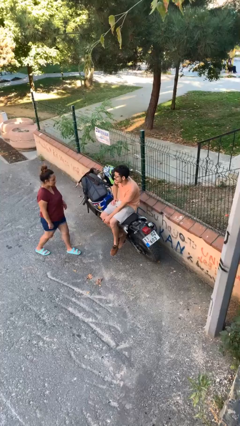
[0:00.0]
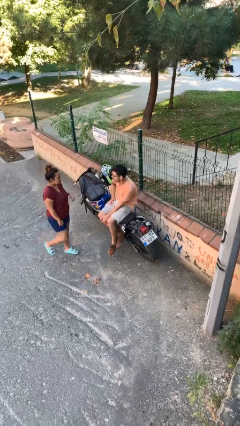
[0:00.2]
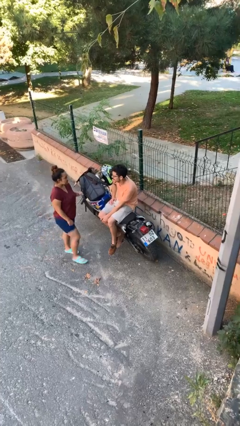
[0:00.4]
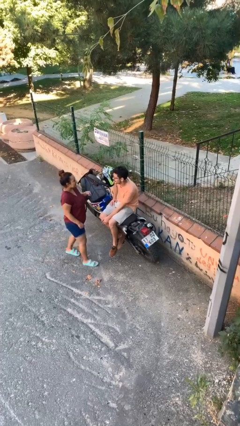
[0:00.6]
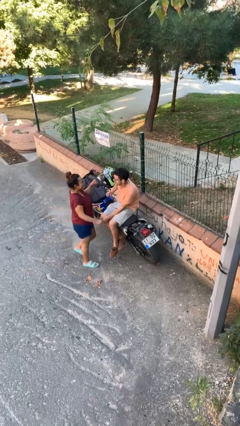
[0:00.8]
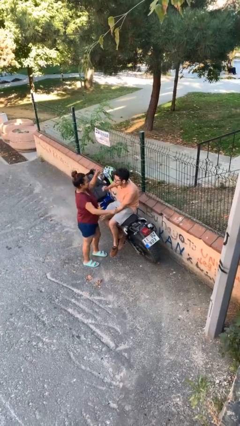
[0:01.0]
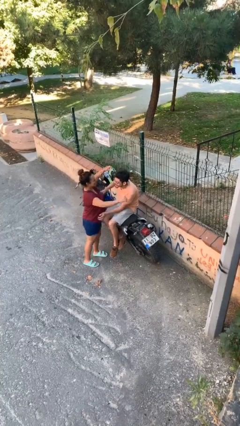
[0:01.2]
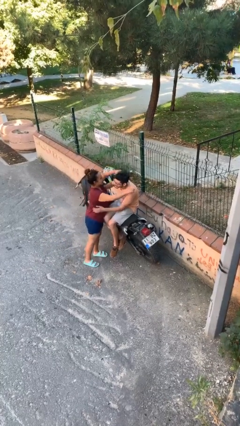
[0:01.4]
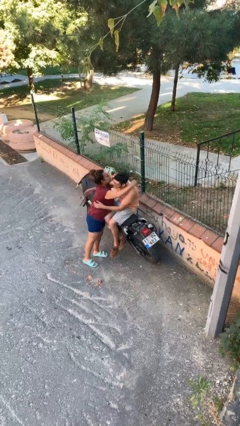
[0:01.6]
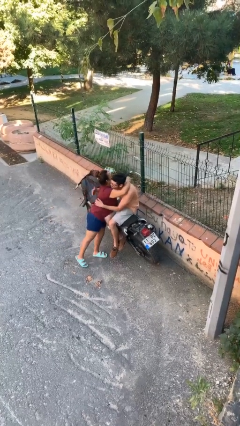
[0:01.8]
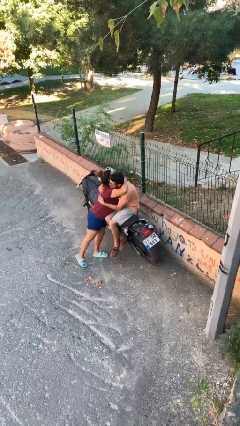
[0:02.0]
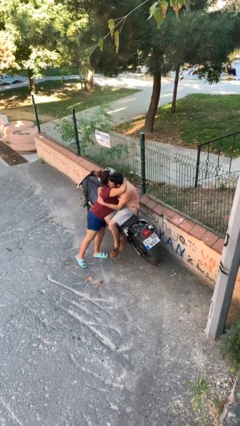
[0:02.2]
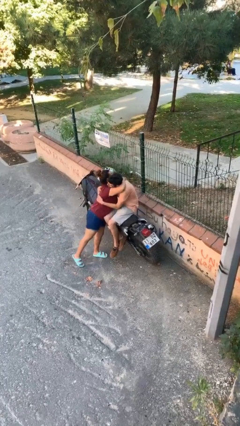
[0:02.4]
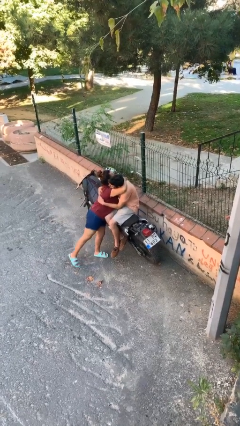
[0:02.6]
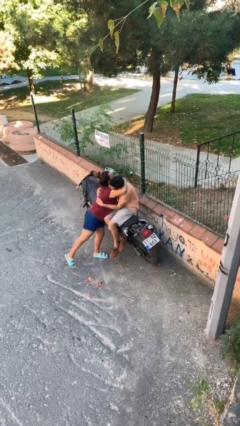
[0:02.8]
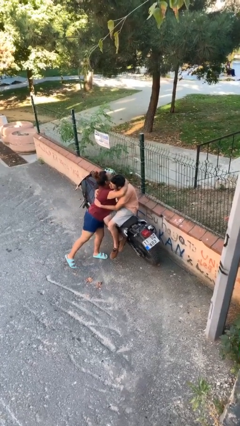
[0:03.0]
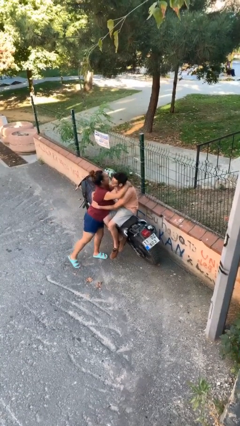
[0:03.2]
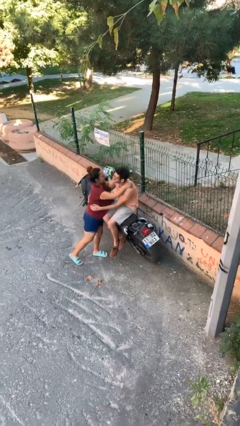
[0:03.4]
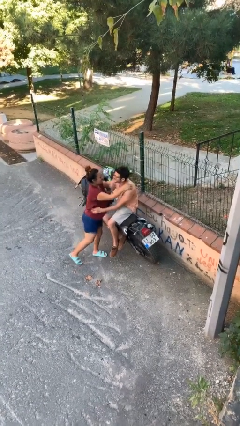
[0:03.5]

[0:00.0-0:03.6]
person embraces person

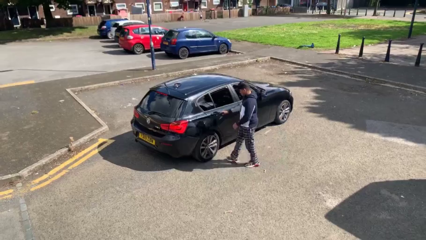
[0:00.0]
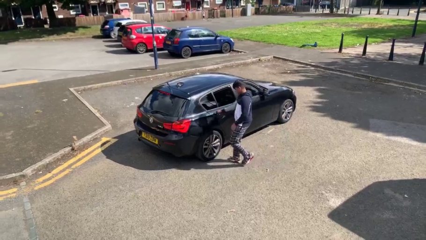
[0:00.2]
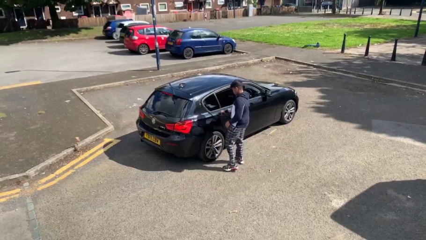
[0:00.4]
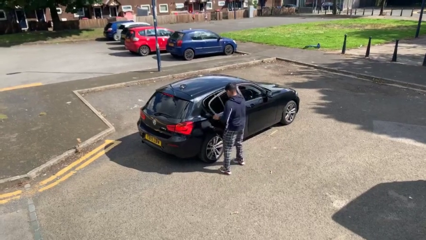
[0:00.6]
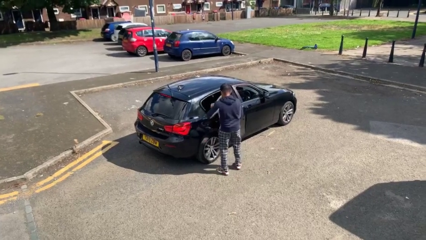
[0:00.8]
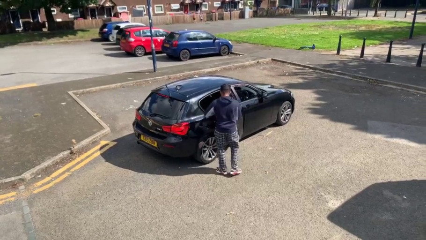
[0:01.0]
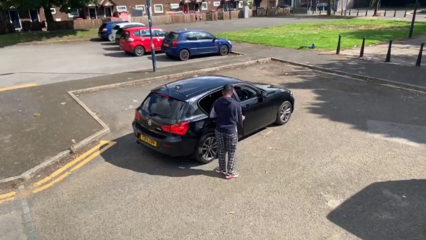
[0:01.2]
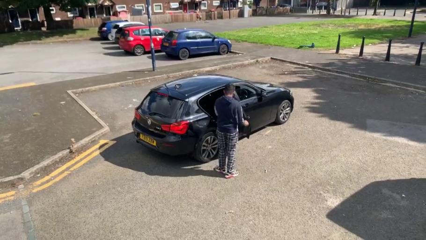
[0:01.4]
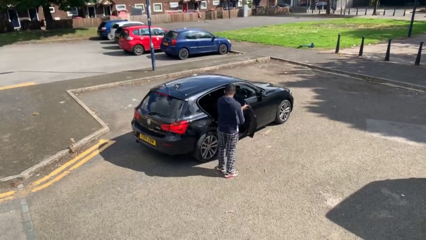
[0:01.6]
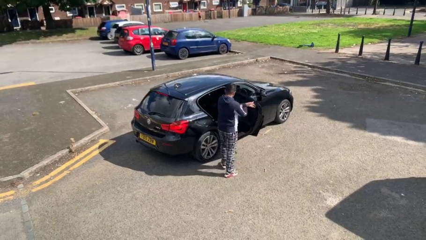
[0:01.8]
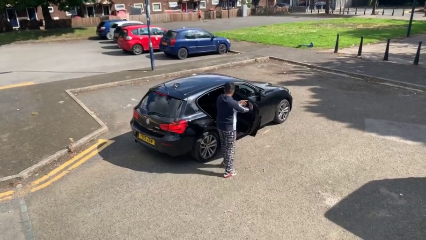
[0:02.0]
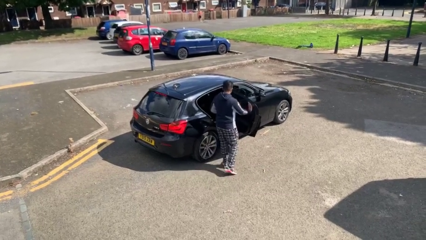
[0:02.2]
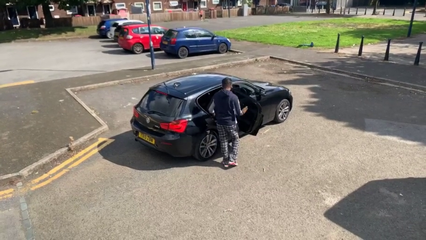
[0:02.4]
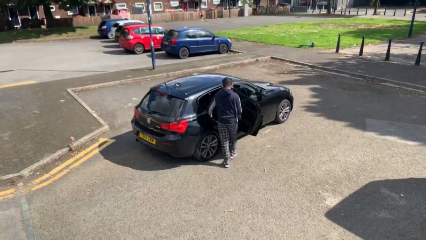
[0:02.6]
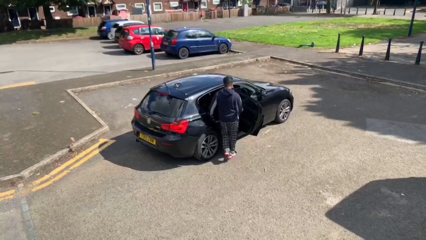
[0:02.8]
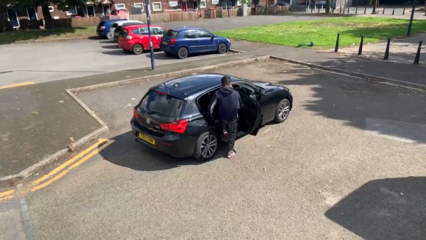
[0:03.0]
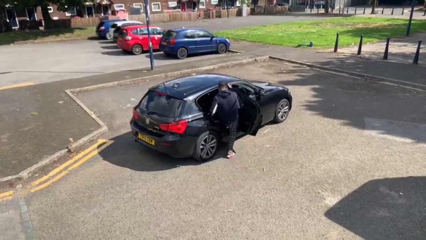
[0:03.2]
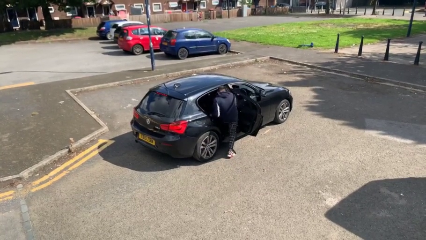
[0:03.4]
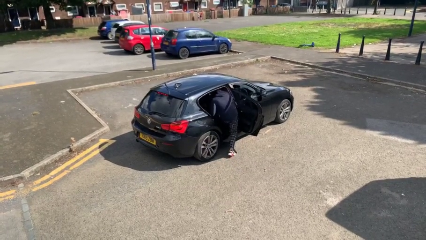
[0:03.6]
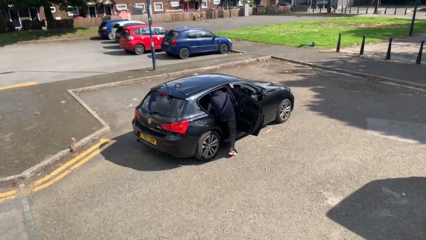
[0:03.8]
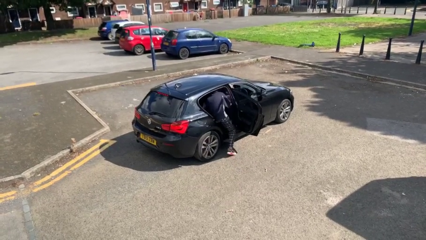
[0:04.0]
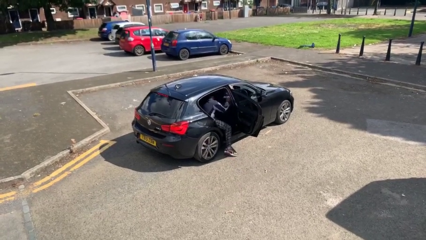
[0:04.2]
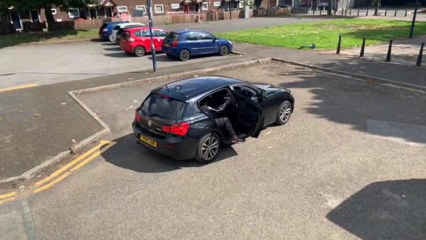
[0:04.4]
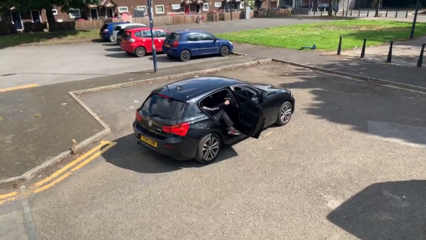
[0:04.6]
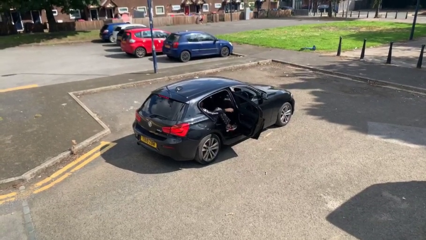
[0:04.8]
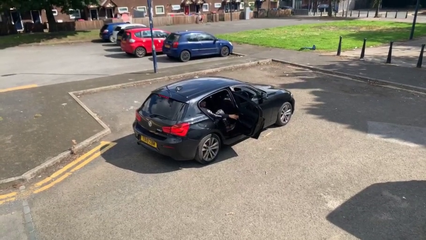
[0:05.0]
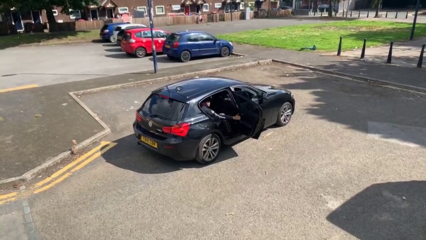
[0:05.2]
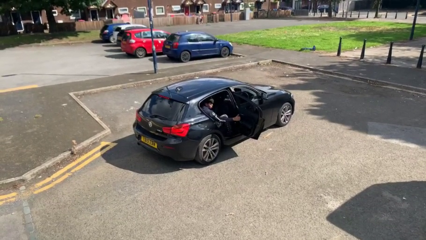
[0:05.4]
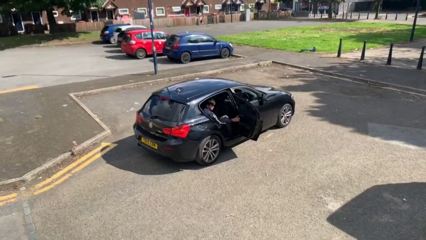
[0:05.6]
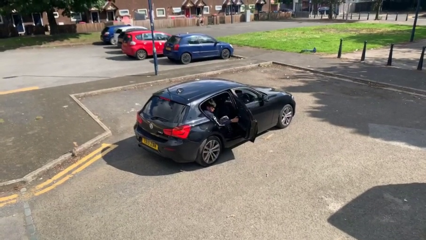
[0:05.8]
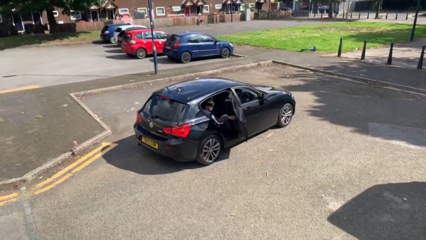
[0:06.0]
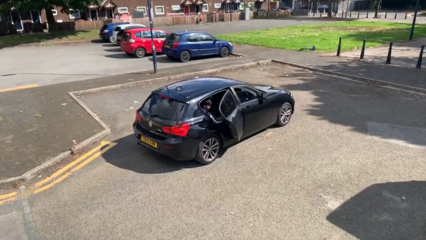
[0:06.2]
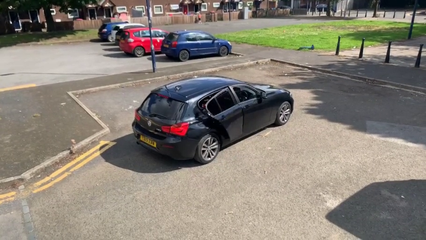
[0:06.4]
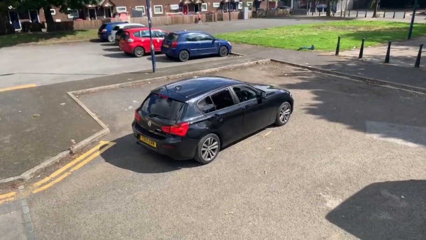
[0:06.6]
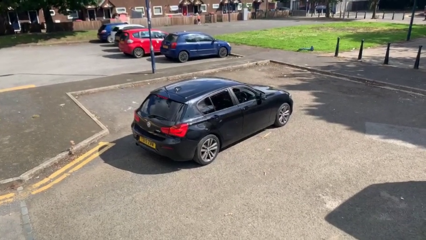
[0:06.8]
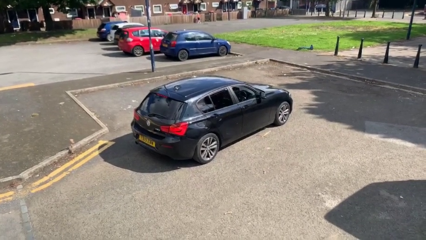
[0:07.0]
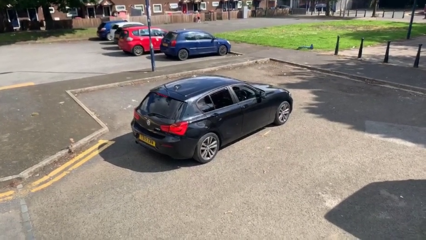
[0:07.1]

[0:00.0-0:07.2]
car picks up person

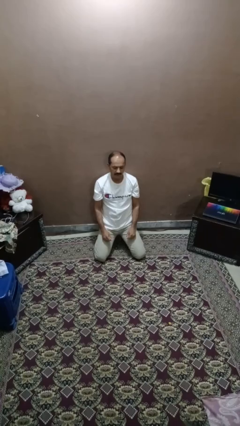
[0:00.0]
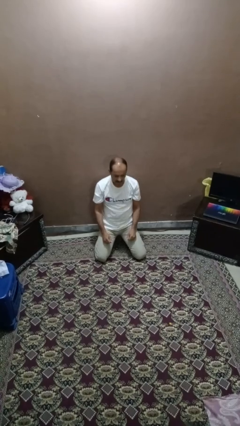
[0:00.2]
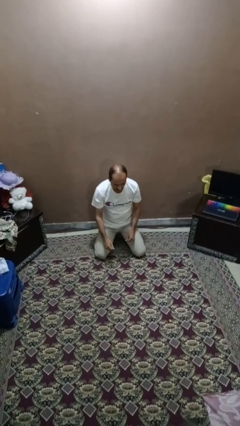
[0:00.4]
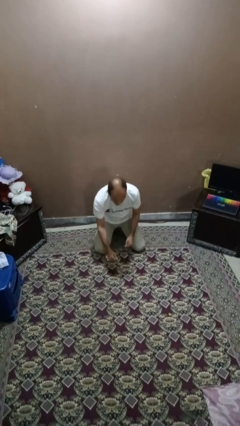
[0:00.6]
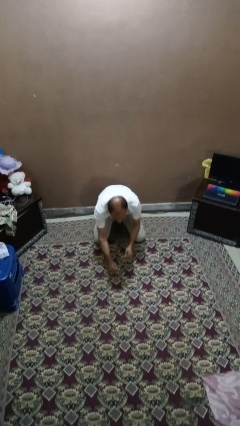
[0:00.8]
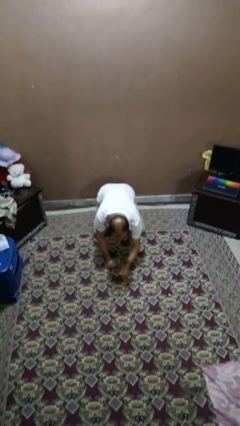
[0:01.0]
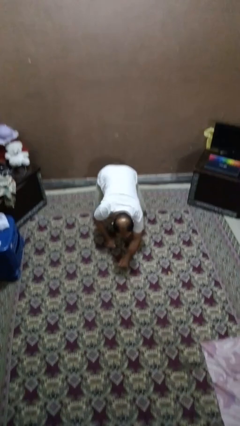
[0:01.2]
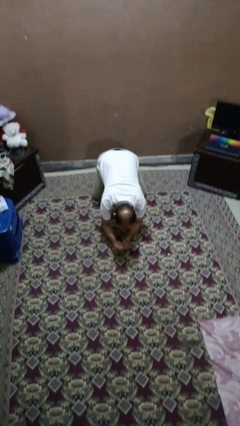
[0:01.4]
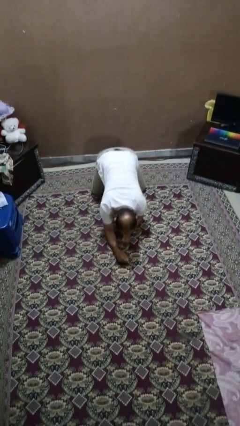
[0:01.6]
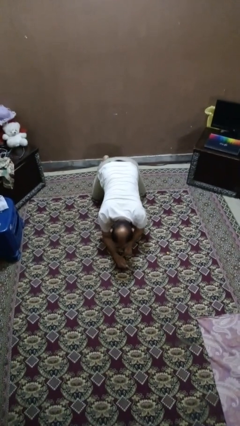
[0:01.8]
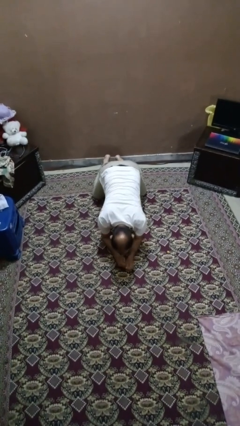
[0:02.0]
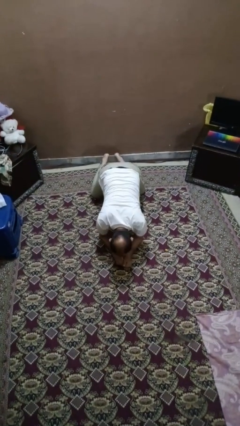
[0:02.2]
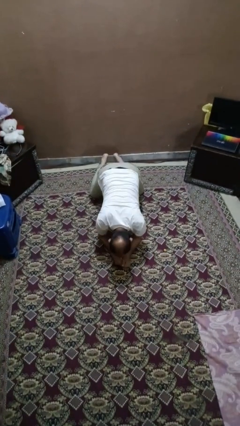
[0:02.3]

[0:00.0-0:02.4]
person crawls

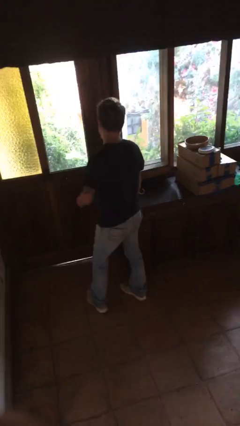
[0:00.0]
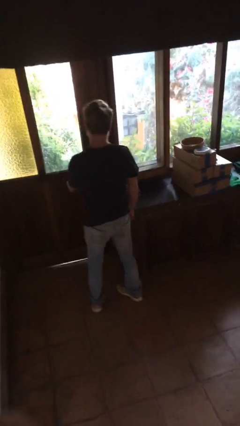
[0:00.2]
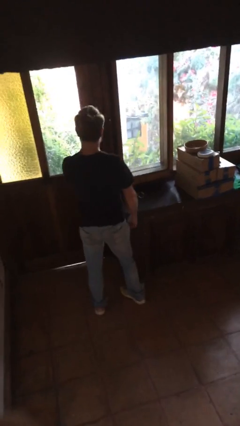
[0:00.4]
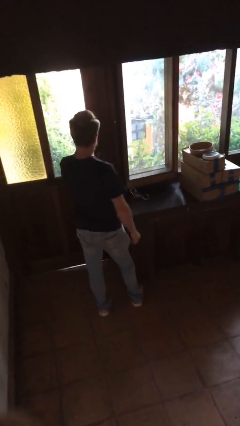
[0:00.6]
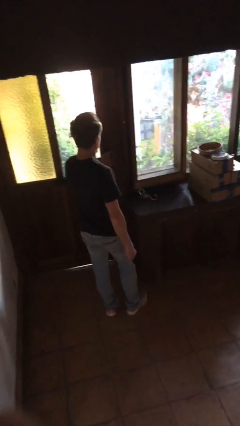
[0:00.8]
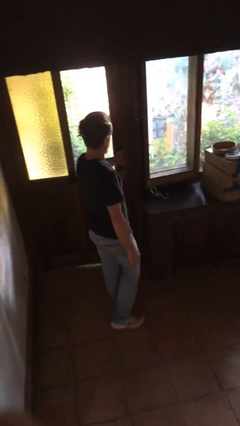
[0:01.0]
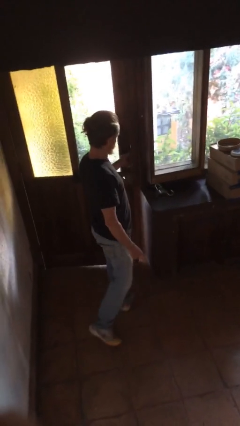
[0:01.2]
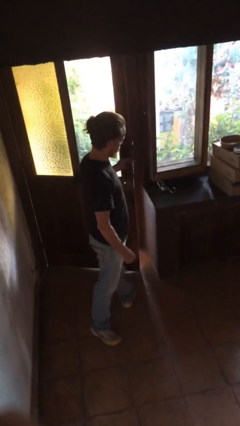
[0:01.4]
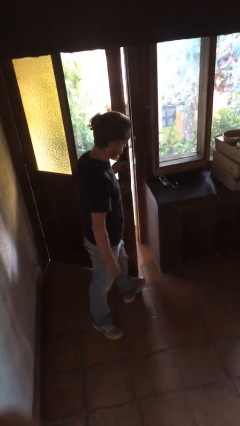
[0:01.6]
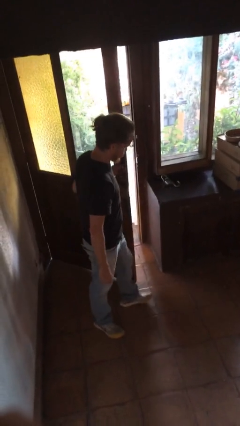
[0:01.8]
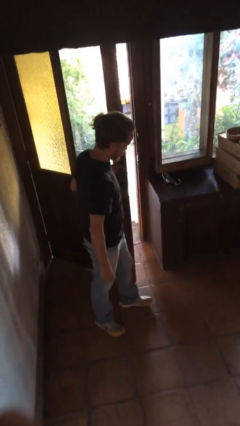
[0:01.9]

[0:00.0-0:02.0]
person opens facility door

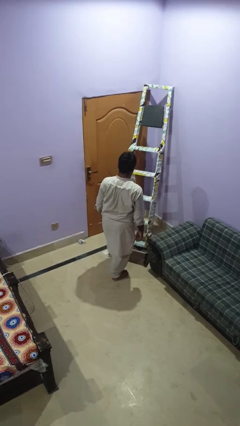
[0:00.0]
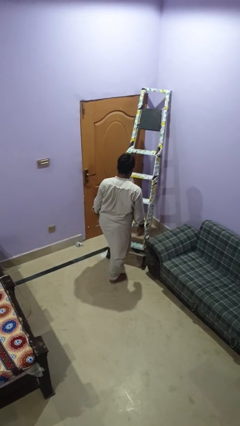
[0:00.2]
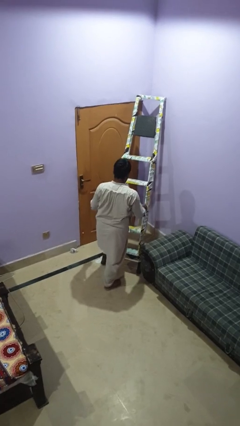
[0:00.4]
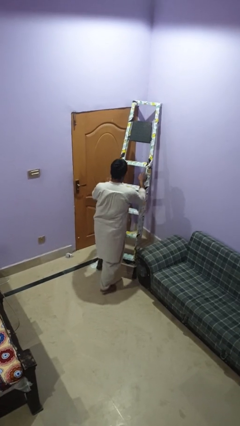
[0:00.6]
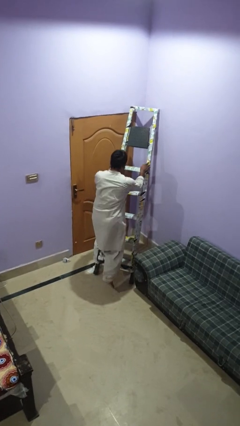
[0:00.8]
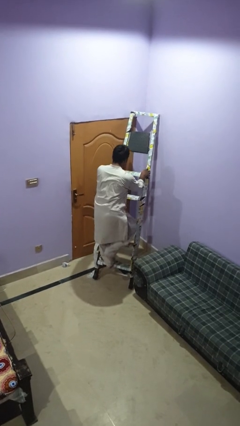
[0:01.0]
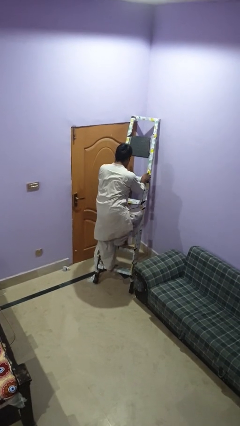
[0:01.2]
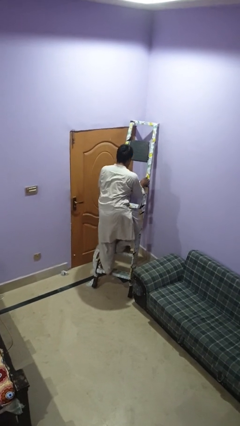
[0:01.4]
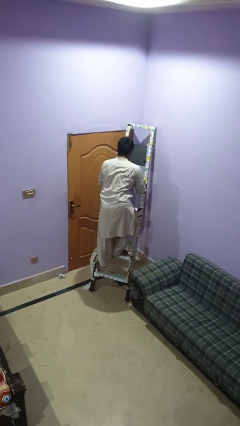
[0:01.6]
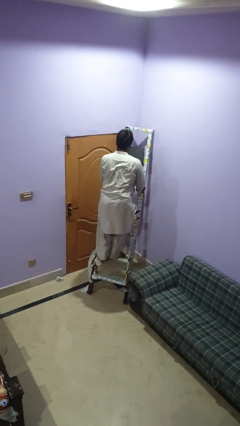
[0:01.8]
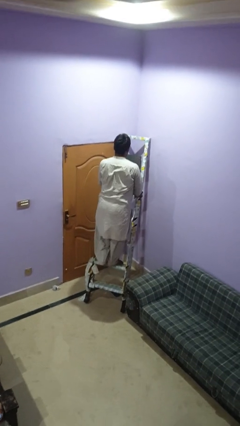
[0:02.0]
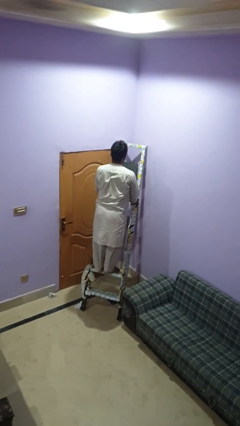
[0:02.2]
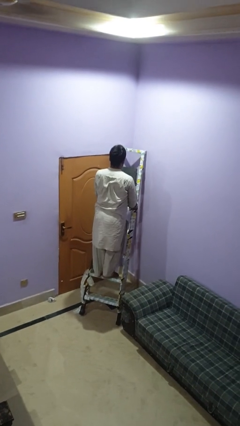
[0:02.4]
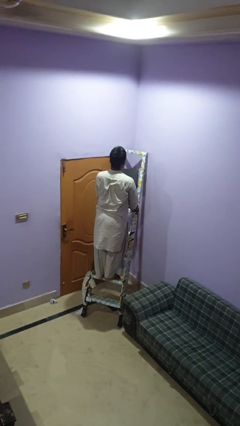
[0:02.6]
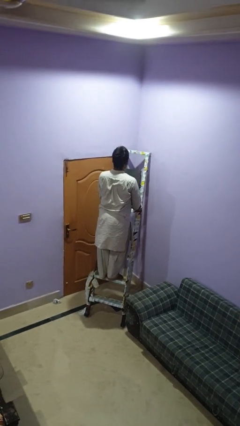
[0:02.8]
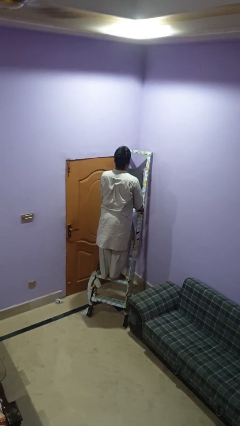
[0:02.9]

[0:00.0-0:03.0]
person climbs up ladder
